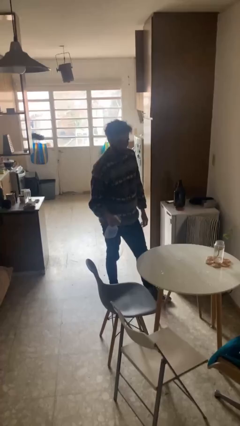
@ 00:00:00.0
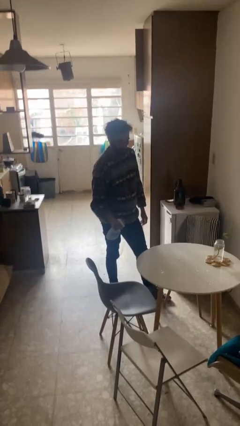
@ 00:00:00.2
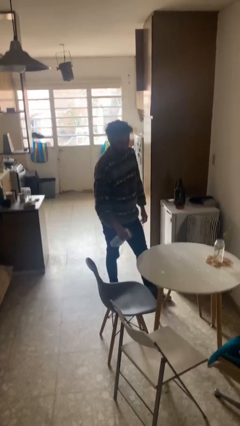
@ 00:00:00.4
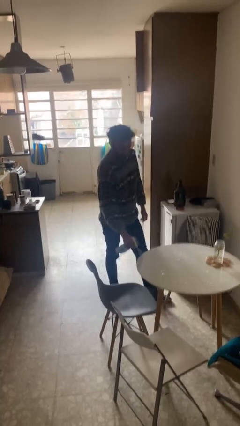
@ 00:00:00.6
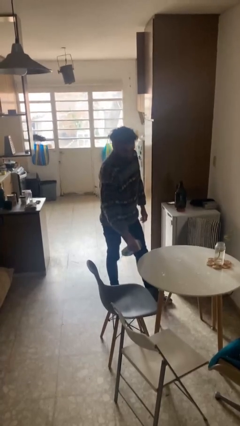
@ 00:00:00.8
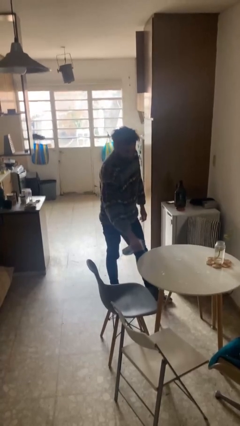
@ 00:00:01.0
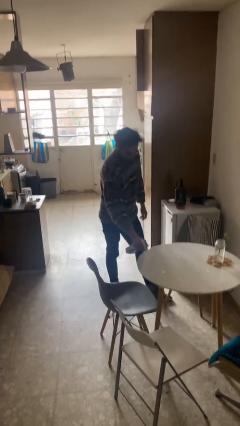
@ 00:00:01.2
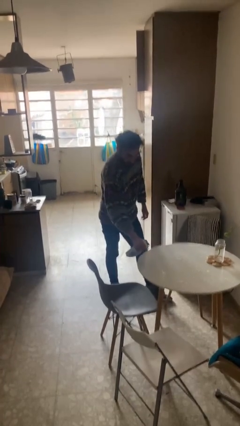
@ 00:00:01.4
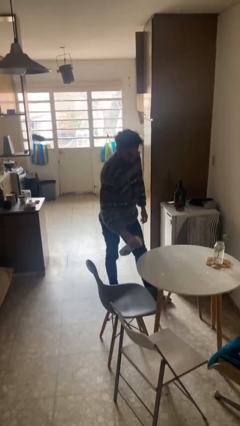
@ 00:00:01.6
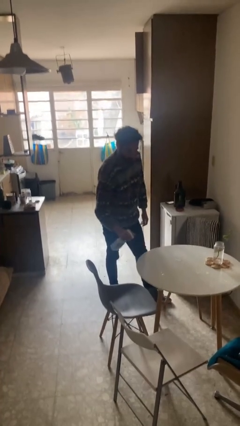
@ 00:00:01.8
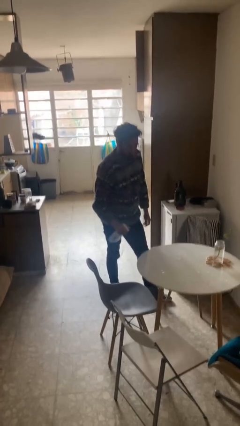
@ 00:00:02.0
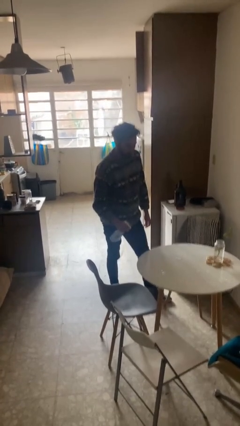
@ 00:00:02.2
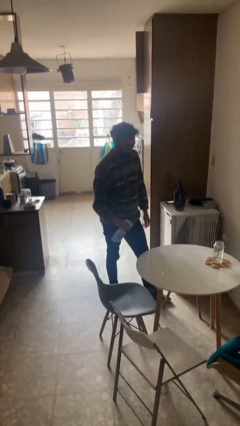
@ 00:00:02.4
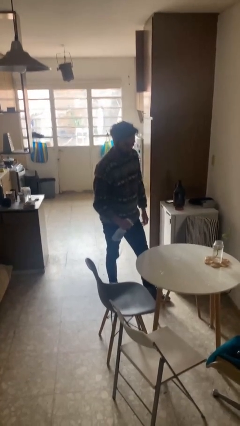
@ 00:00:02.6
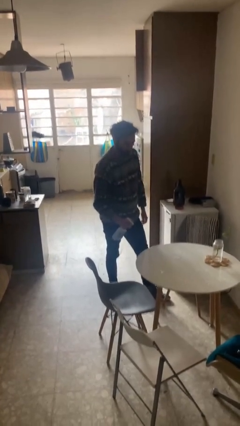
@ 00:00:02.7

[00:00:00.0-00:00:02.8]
person sprays from bottle

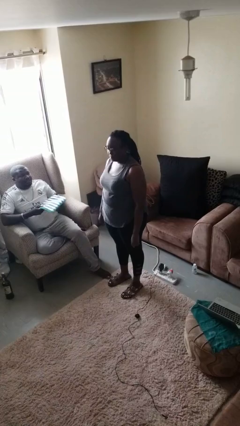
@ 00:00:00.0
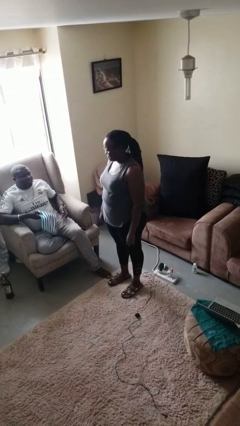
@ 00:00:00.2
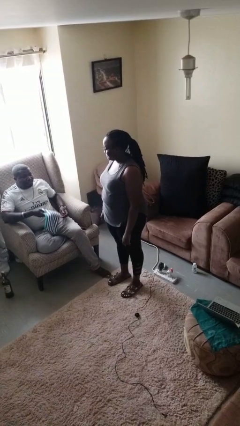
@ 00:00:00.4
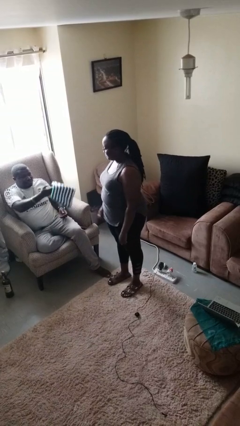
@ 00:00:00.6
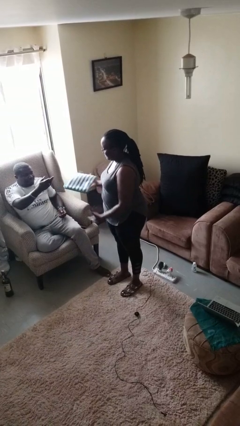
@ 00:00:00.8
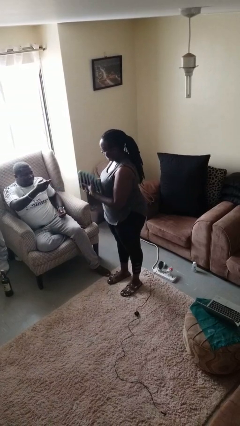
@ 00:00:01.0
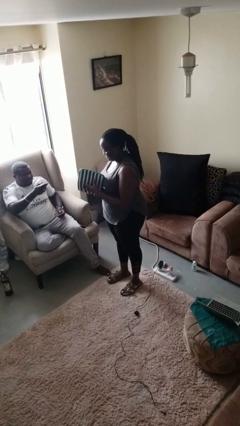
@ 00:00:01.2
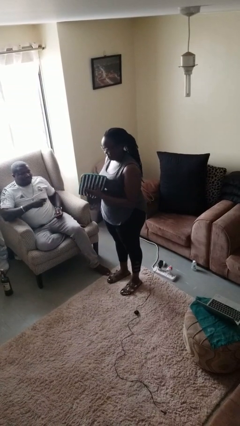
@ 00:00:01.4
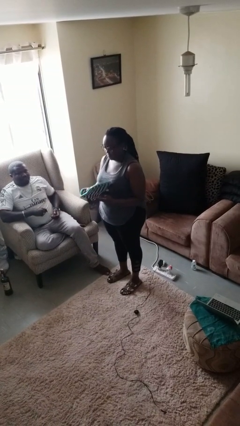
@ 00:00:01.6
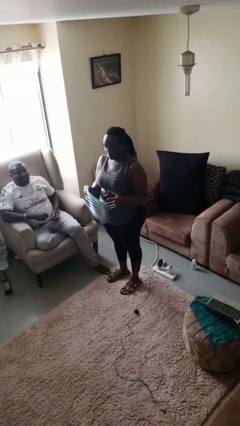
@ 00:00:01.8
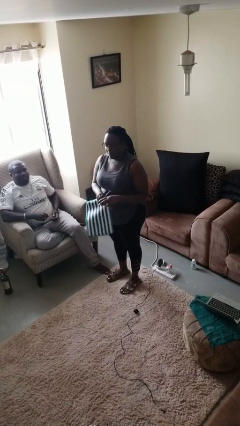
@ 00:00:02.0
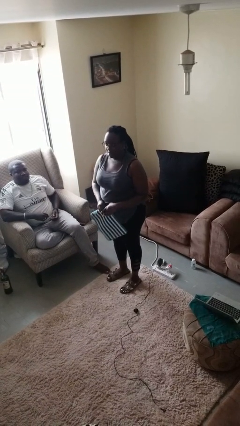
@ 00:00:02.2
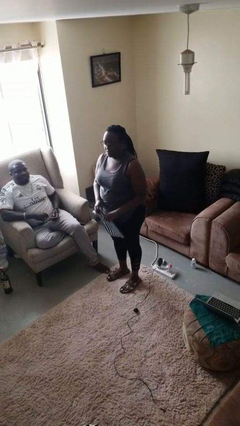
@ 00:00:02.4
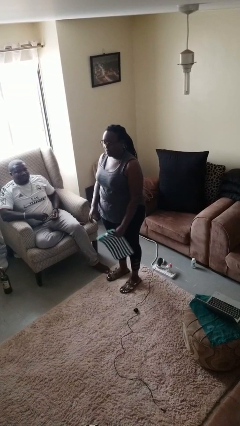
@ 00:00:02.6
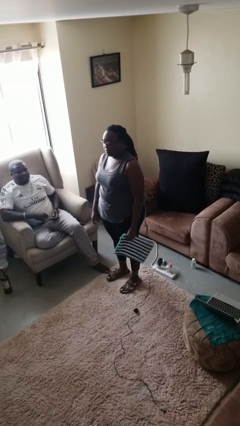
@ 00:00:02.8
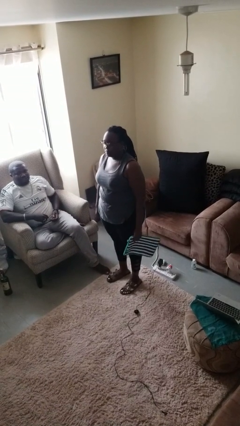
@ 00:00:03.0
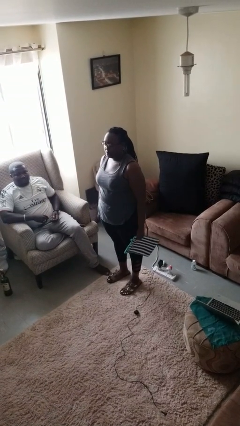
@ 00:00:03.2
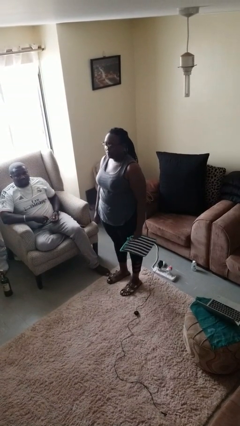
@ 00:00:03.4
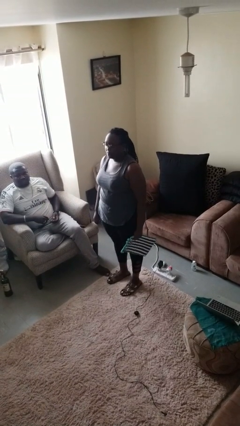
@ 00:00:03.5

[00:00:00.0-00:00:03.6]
person catches object from person

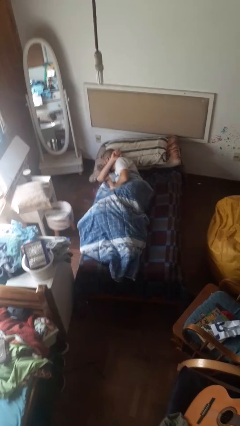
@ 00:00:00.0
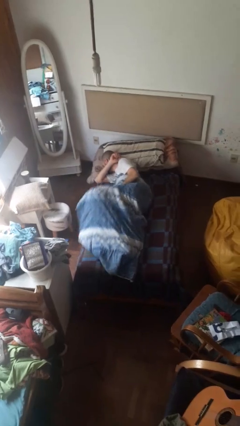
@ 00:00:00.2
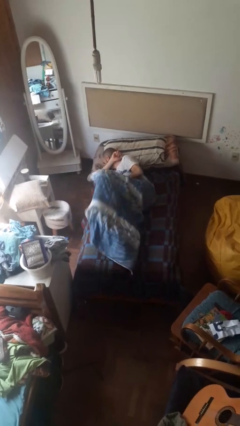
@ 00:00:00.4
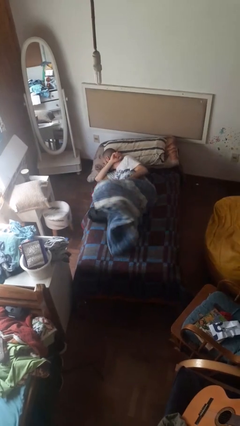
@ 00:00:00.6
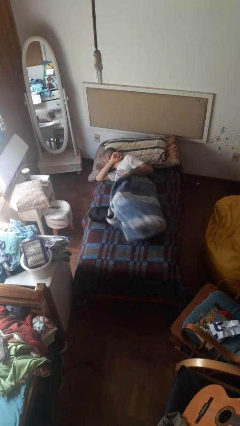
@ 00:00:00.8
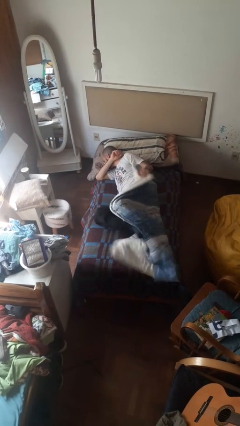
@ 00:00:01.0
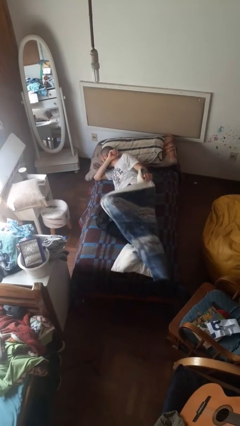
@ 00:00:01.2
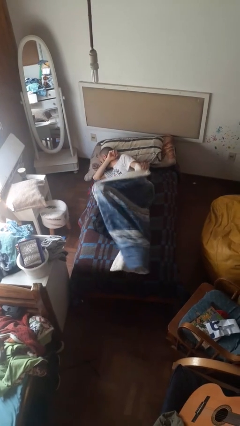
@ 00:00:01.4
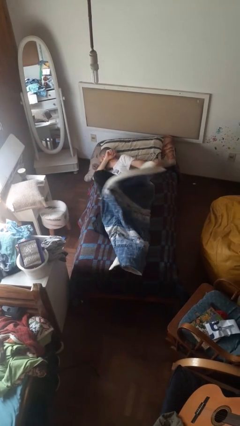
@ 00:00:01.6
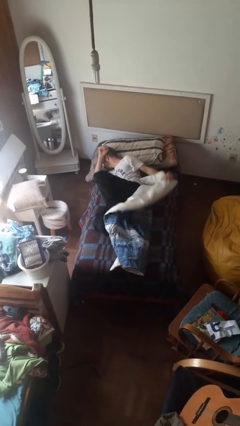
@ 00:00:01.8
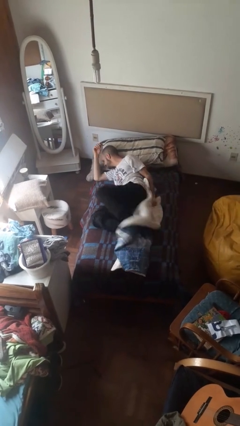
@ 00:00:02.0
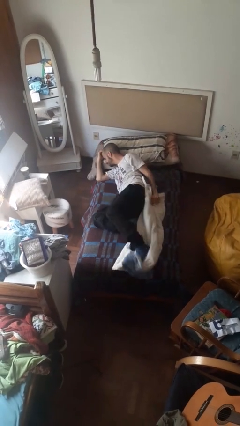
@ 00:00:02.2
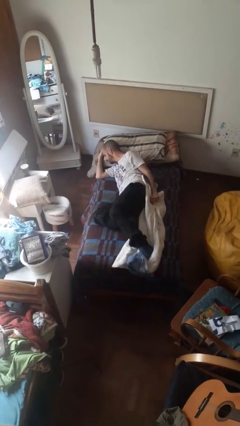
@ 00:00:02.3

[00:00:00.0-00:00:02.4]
person uncovers with bedsheets

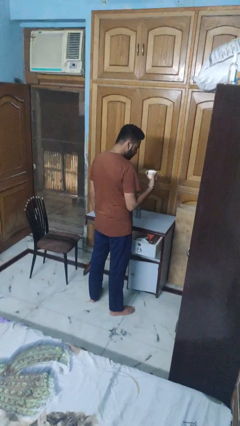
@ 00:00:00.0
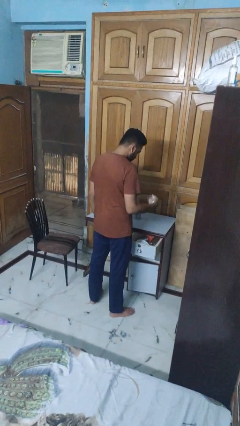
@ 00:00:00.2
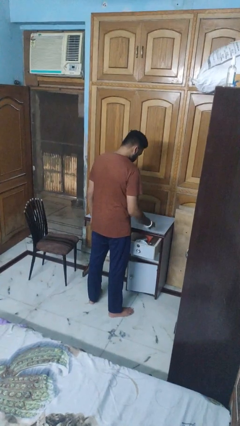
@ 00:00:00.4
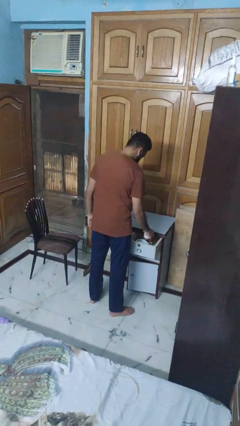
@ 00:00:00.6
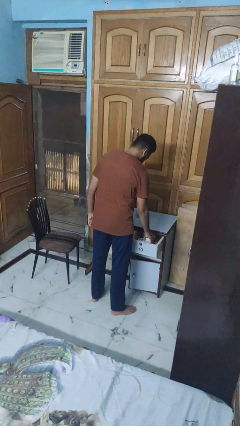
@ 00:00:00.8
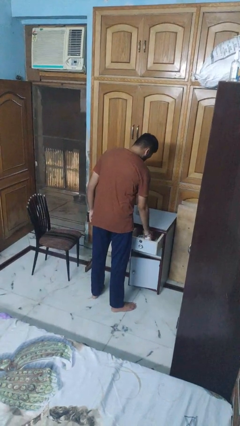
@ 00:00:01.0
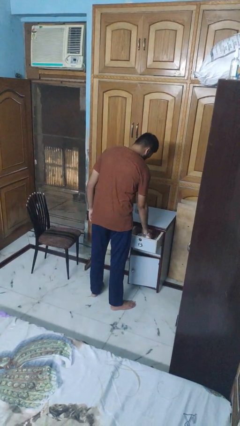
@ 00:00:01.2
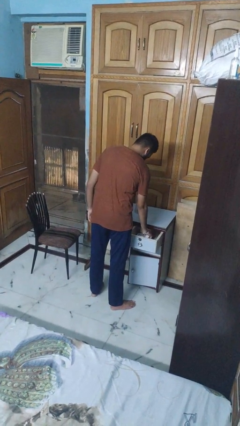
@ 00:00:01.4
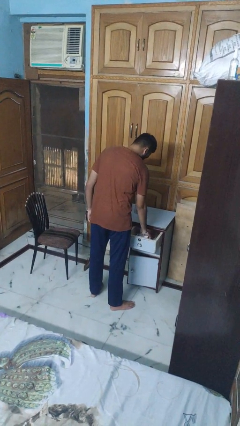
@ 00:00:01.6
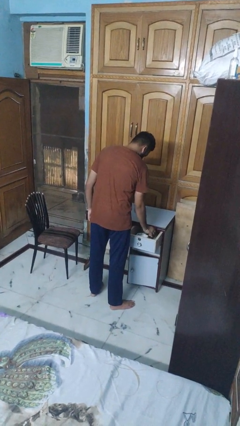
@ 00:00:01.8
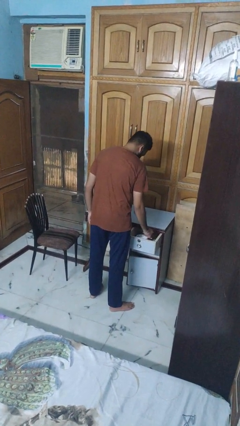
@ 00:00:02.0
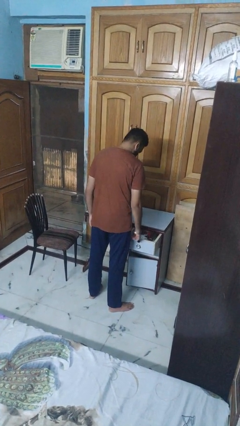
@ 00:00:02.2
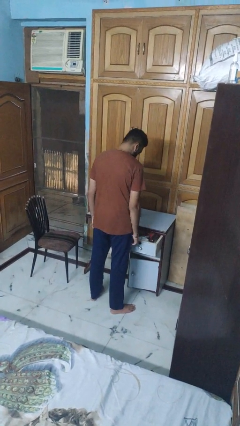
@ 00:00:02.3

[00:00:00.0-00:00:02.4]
person puts object into kitchen drawer

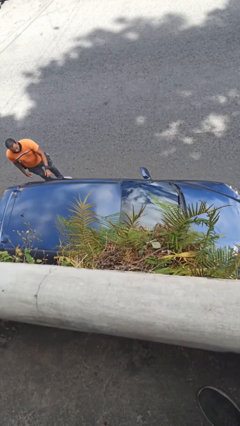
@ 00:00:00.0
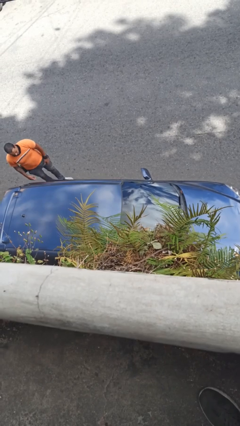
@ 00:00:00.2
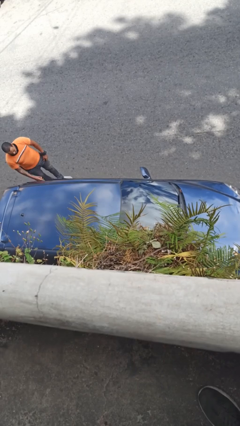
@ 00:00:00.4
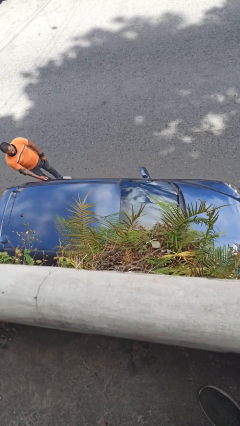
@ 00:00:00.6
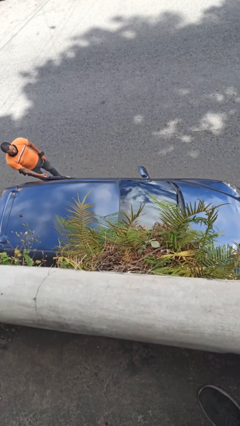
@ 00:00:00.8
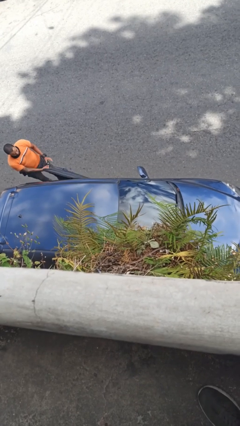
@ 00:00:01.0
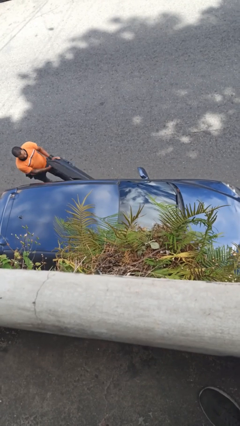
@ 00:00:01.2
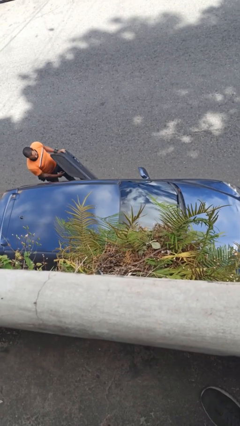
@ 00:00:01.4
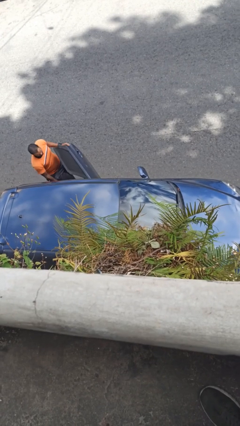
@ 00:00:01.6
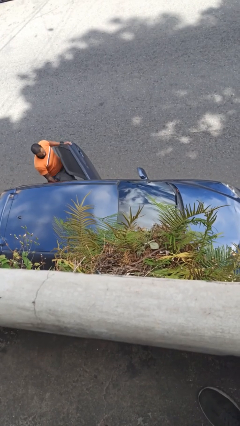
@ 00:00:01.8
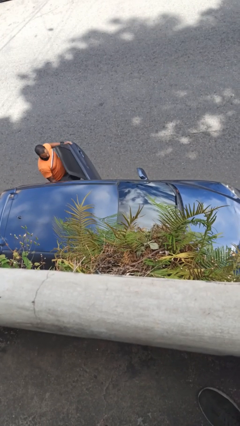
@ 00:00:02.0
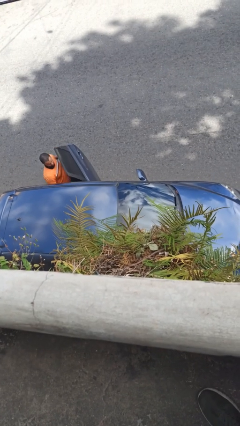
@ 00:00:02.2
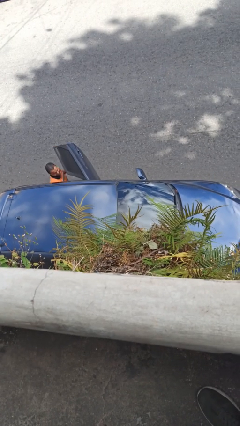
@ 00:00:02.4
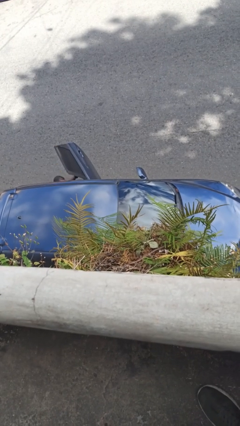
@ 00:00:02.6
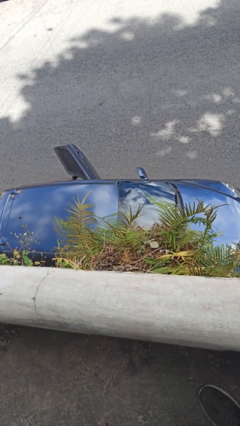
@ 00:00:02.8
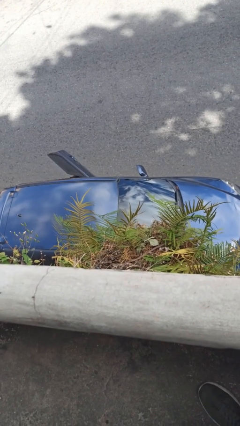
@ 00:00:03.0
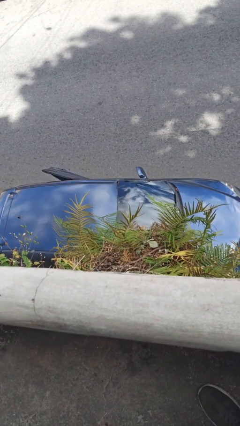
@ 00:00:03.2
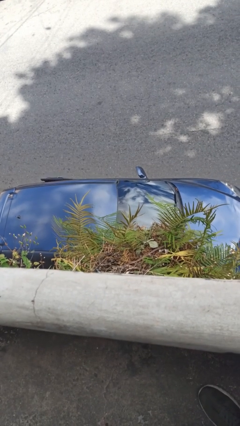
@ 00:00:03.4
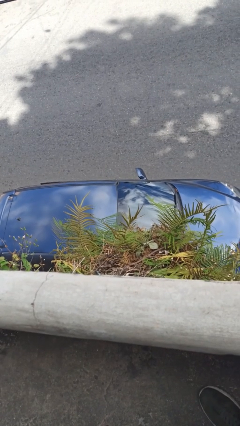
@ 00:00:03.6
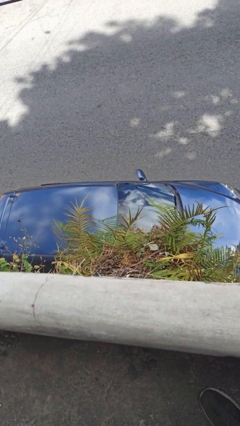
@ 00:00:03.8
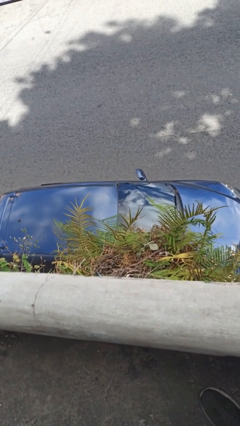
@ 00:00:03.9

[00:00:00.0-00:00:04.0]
car picks up person

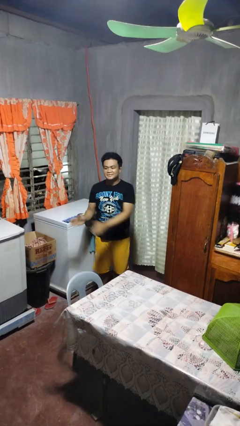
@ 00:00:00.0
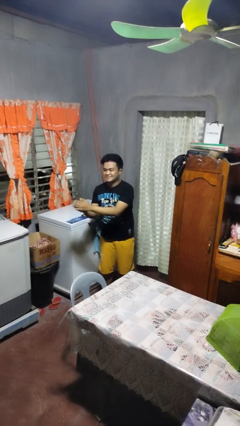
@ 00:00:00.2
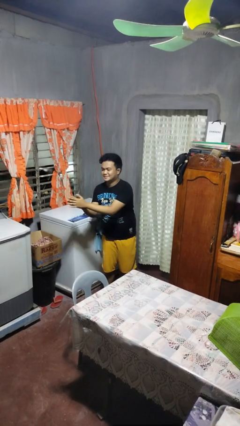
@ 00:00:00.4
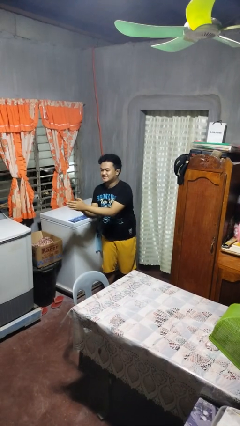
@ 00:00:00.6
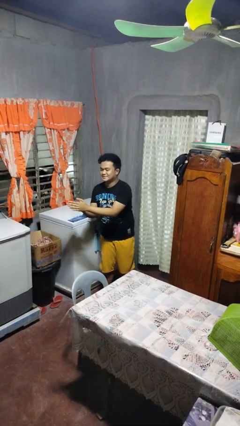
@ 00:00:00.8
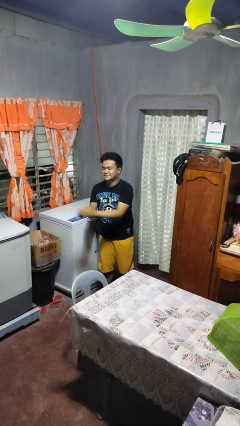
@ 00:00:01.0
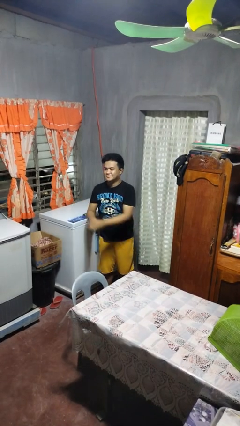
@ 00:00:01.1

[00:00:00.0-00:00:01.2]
person claps hands

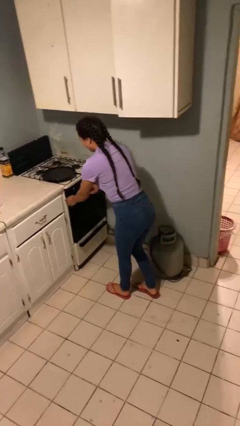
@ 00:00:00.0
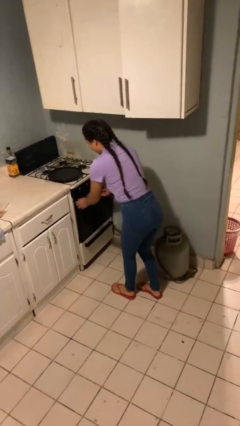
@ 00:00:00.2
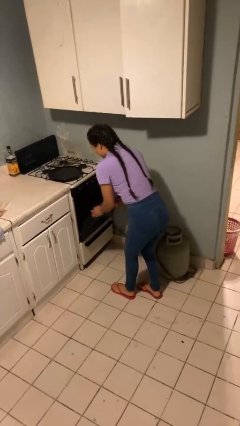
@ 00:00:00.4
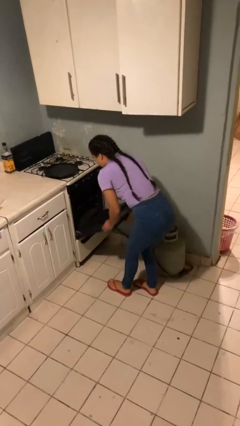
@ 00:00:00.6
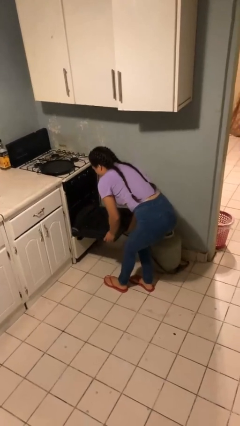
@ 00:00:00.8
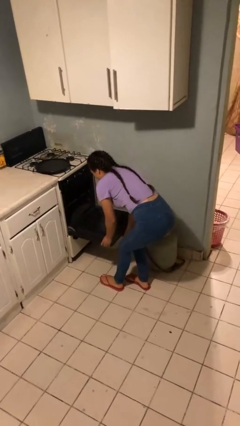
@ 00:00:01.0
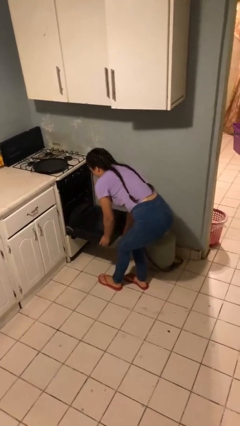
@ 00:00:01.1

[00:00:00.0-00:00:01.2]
person opens oven door
